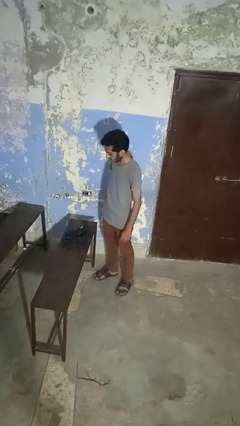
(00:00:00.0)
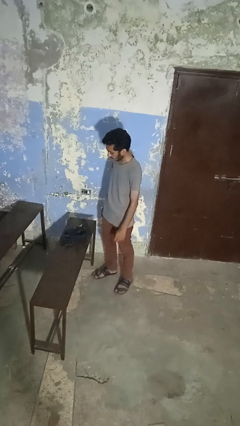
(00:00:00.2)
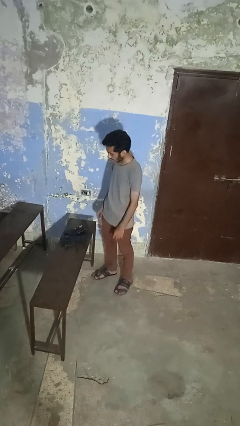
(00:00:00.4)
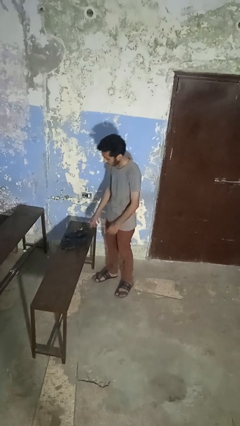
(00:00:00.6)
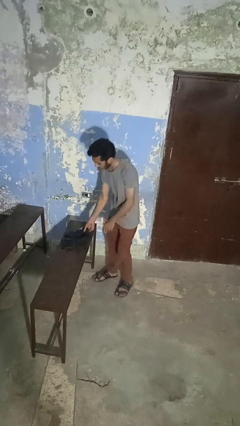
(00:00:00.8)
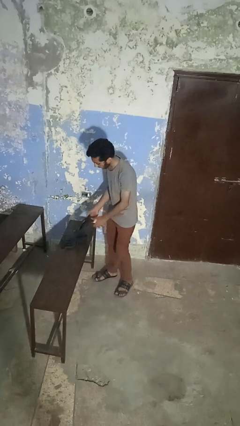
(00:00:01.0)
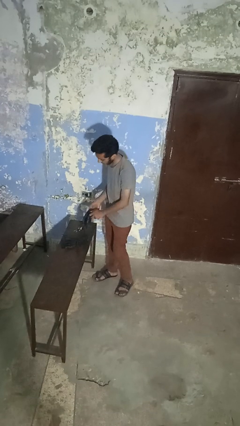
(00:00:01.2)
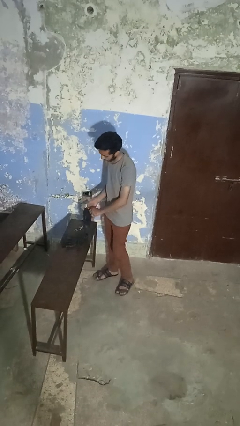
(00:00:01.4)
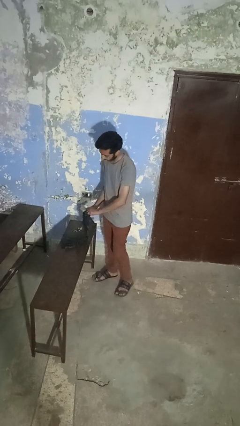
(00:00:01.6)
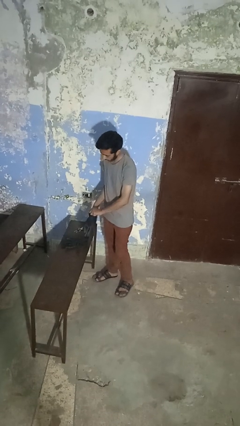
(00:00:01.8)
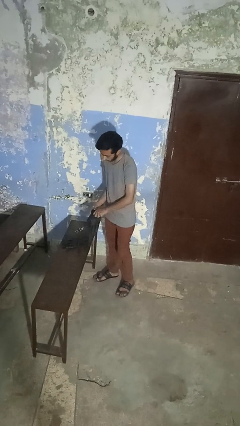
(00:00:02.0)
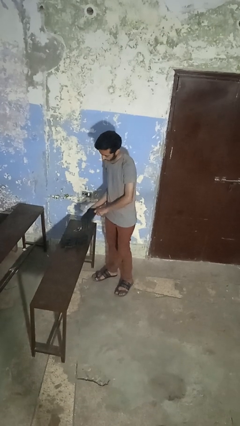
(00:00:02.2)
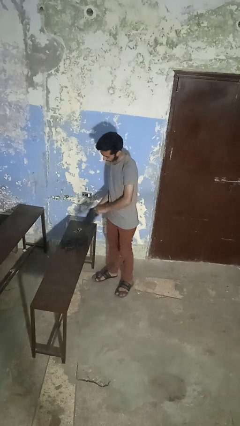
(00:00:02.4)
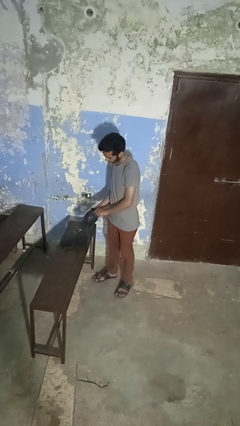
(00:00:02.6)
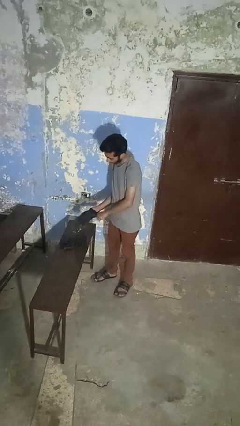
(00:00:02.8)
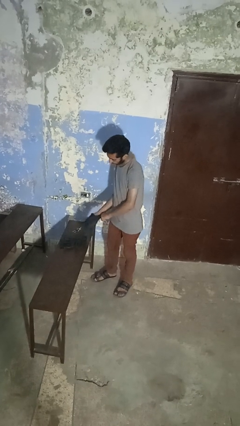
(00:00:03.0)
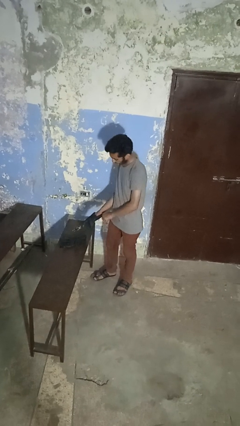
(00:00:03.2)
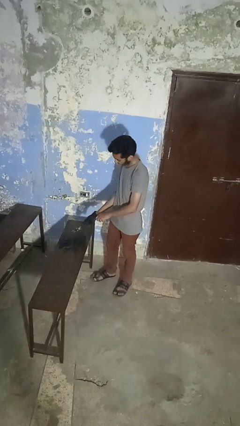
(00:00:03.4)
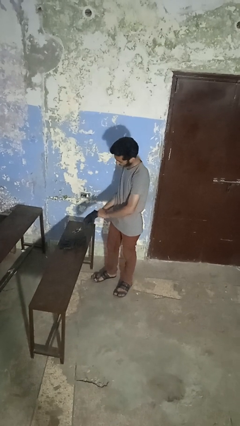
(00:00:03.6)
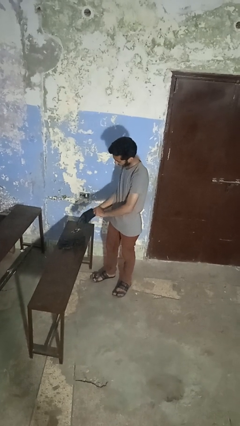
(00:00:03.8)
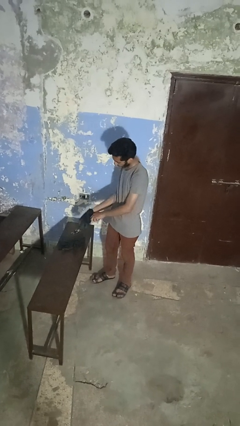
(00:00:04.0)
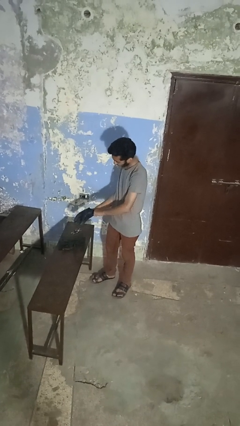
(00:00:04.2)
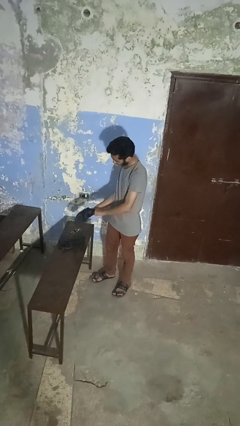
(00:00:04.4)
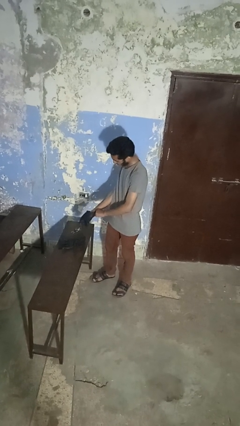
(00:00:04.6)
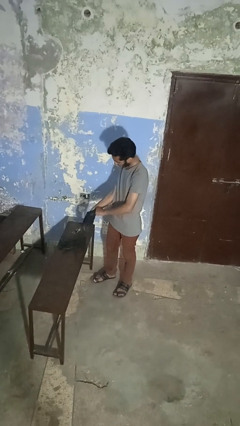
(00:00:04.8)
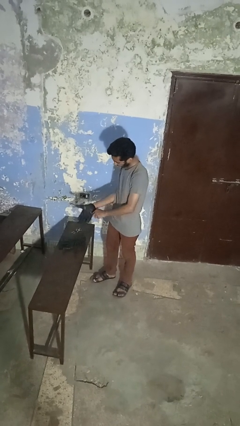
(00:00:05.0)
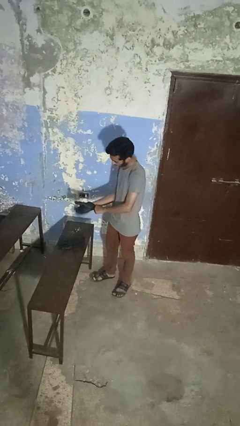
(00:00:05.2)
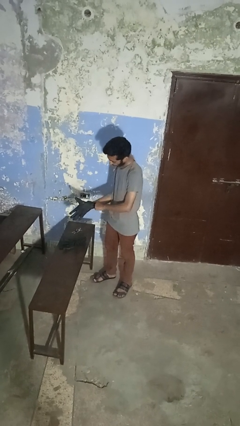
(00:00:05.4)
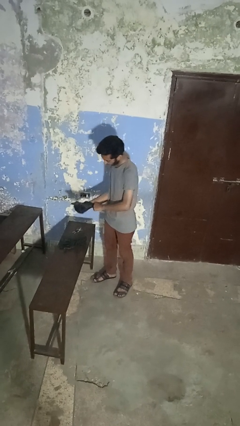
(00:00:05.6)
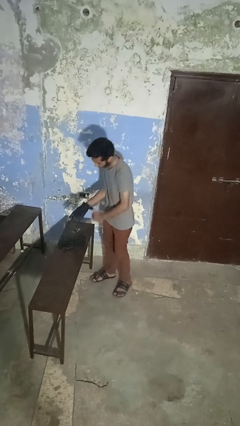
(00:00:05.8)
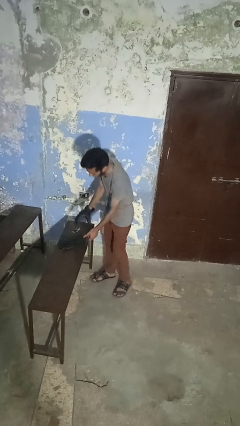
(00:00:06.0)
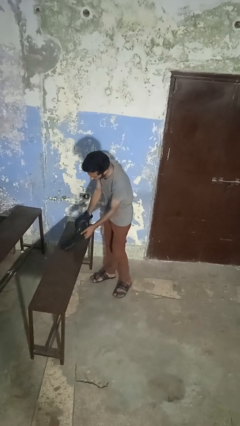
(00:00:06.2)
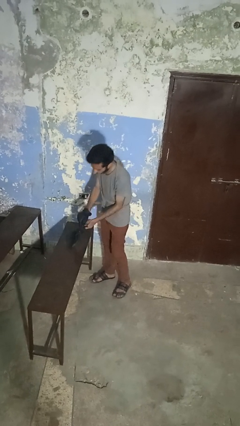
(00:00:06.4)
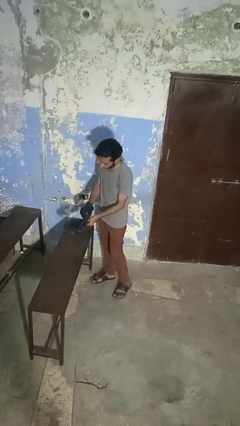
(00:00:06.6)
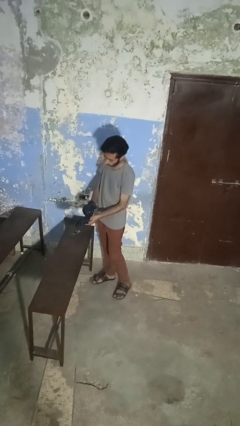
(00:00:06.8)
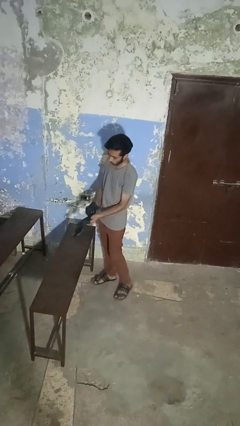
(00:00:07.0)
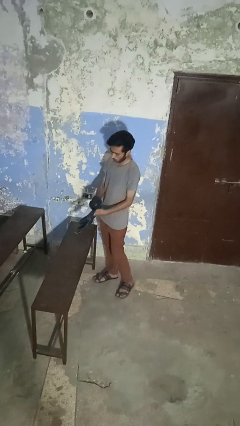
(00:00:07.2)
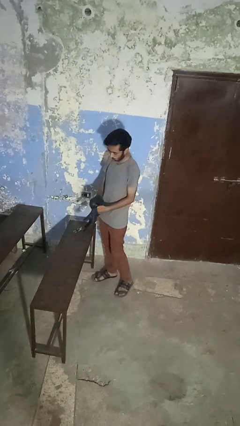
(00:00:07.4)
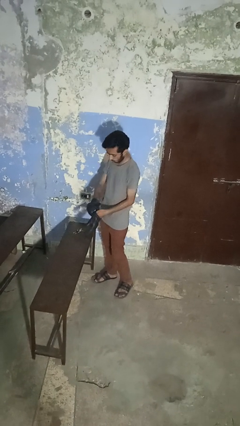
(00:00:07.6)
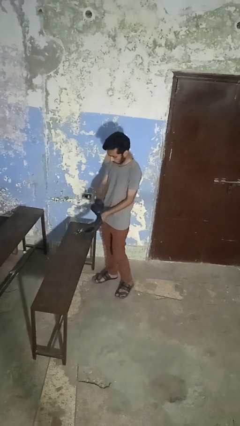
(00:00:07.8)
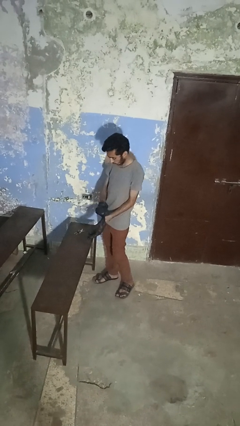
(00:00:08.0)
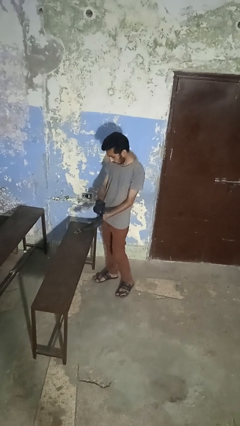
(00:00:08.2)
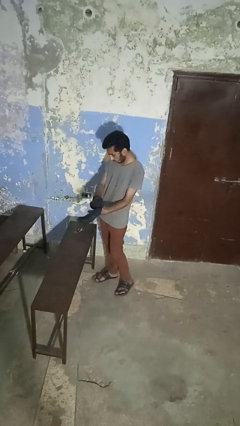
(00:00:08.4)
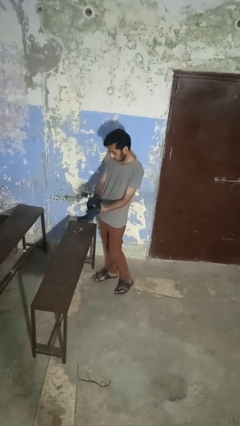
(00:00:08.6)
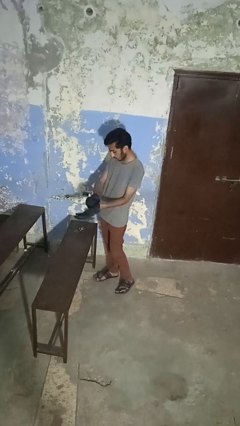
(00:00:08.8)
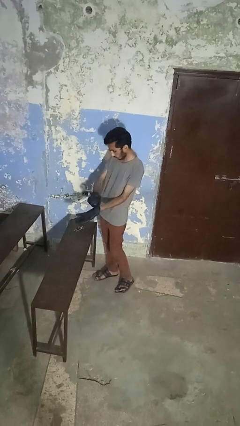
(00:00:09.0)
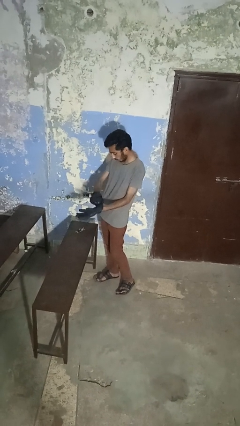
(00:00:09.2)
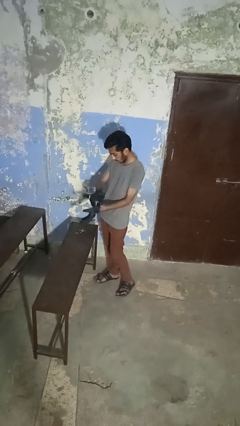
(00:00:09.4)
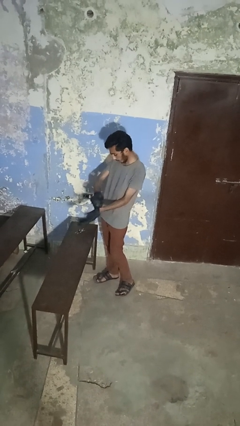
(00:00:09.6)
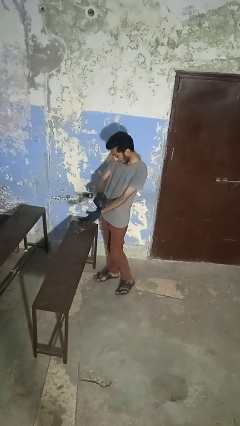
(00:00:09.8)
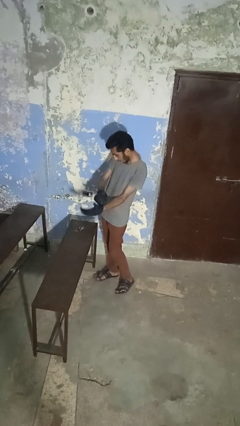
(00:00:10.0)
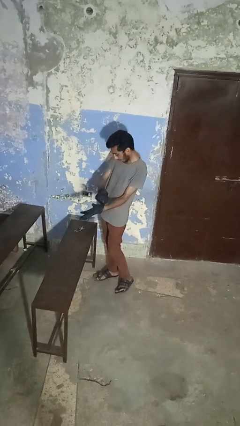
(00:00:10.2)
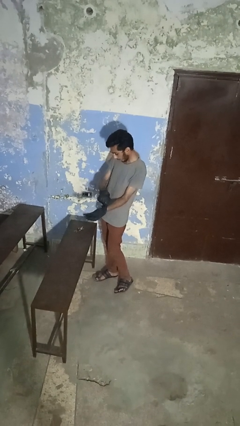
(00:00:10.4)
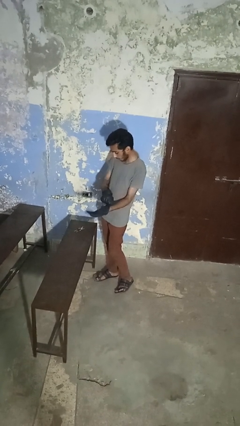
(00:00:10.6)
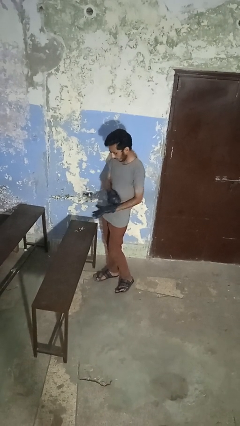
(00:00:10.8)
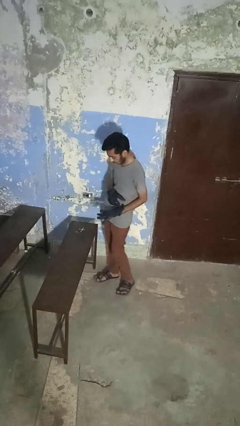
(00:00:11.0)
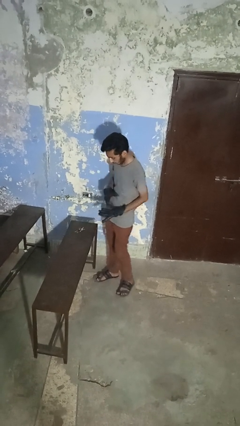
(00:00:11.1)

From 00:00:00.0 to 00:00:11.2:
person puts on gloves

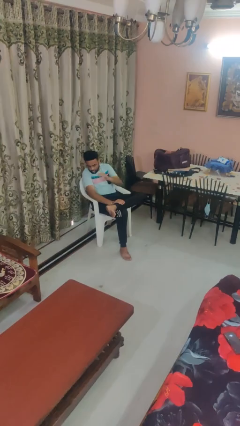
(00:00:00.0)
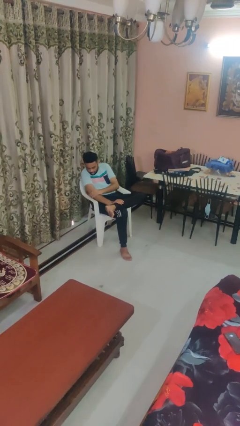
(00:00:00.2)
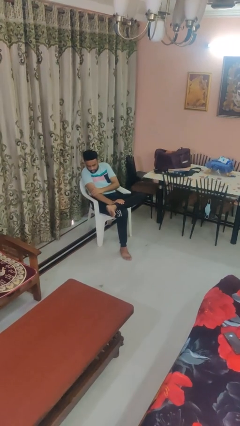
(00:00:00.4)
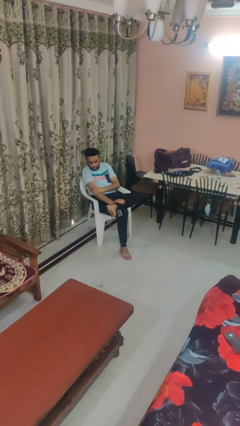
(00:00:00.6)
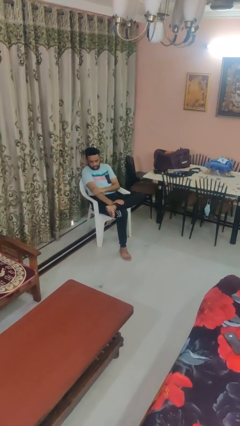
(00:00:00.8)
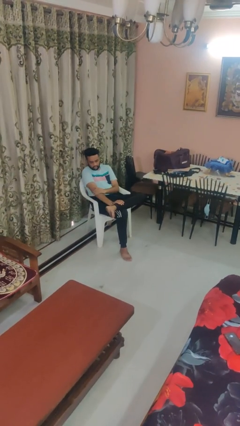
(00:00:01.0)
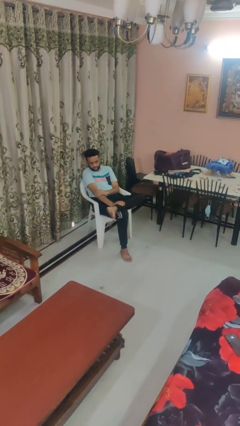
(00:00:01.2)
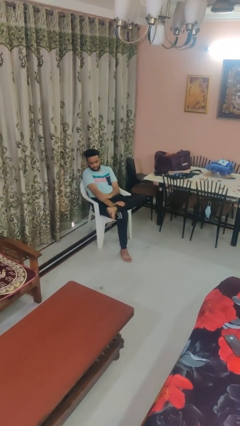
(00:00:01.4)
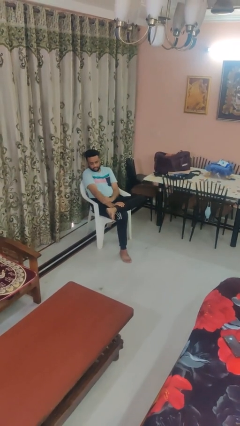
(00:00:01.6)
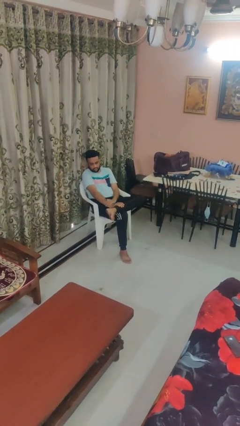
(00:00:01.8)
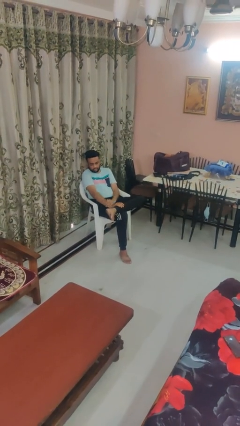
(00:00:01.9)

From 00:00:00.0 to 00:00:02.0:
person swats bug

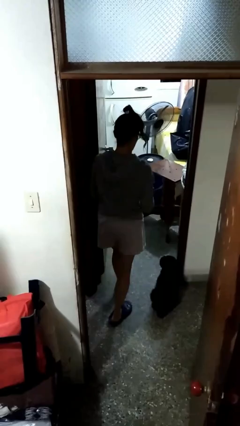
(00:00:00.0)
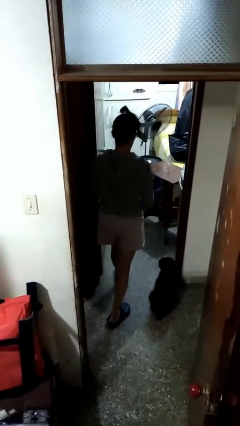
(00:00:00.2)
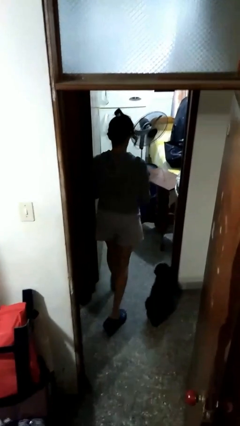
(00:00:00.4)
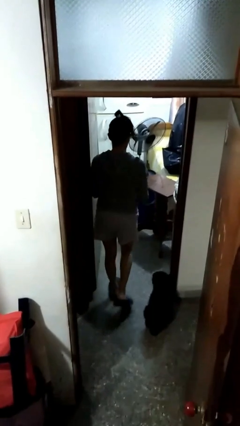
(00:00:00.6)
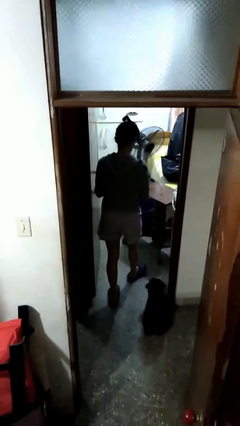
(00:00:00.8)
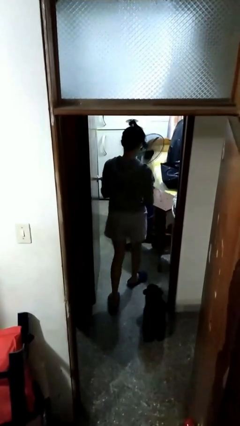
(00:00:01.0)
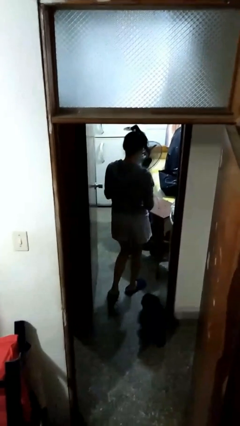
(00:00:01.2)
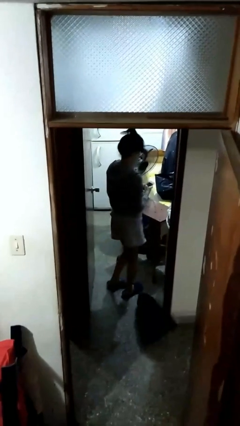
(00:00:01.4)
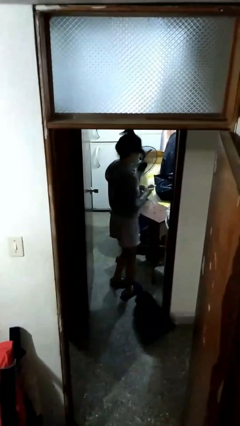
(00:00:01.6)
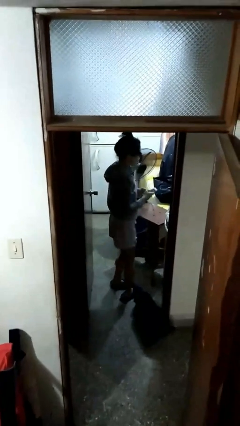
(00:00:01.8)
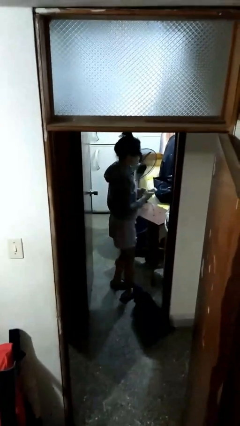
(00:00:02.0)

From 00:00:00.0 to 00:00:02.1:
person exits scene through structure

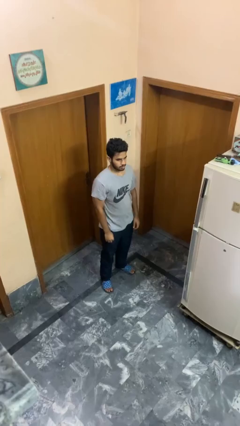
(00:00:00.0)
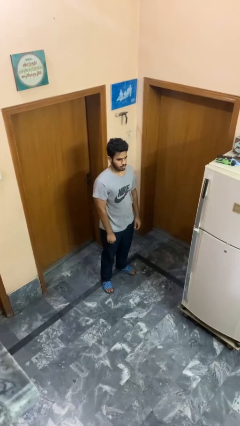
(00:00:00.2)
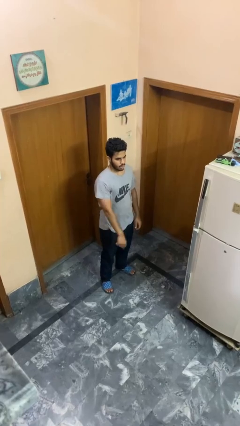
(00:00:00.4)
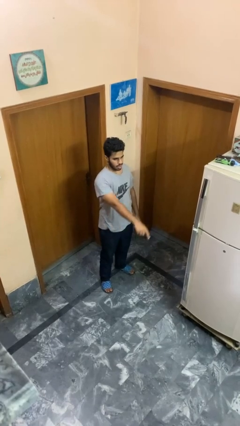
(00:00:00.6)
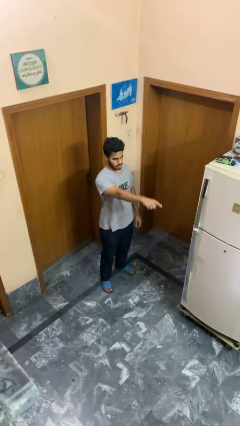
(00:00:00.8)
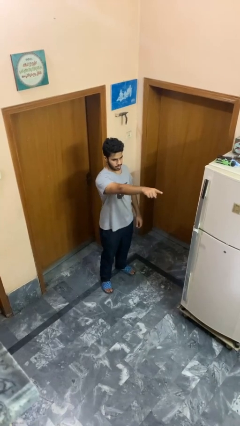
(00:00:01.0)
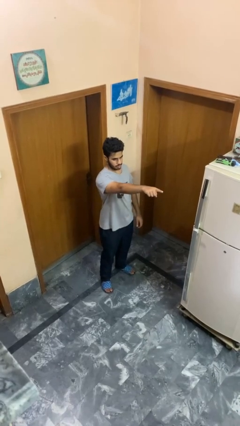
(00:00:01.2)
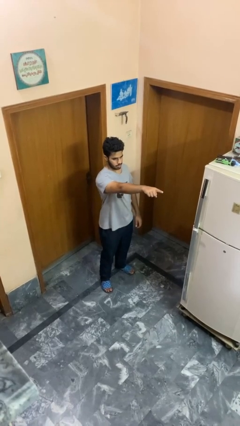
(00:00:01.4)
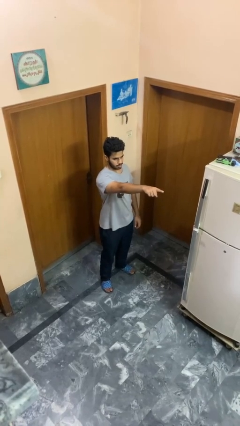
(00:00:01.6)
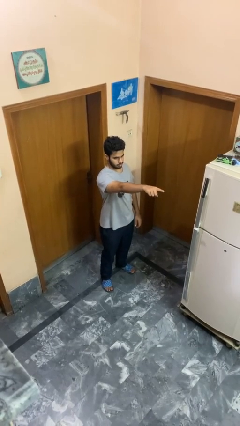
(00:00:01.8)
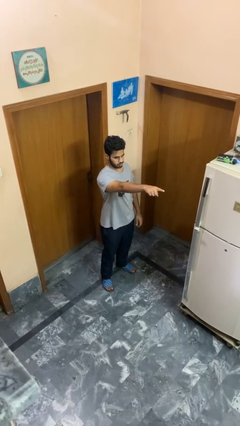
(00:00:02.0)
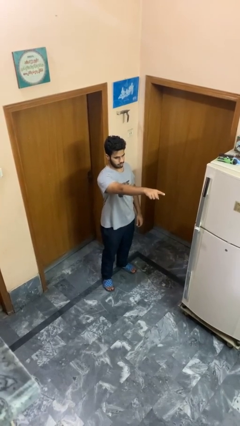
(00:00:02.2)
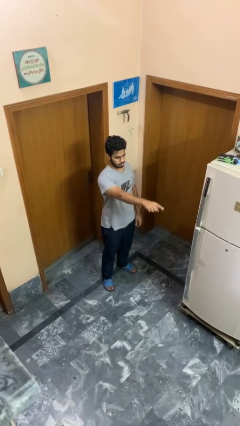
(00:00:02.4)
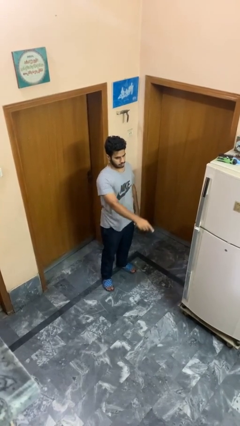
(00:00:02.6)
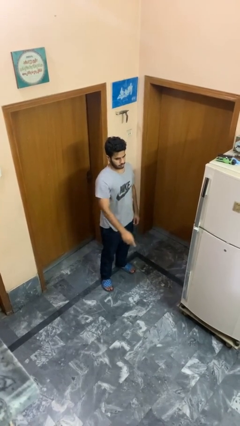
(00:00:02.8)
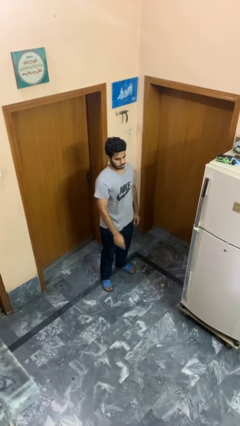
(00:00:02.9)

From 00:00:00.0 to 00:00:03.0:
person points at person
